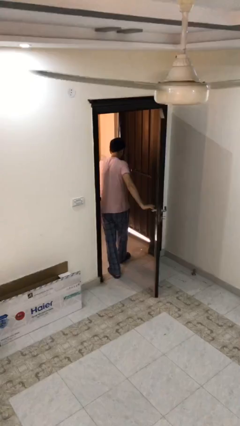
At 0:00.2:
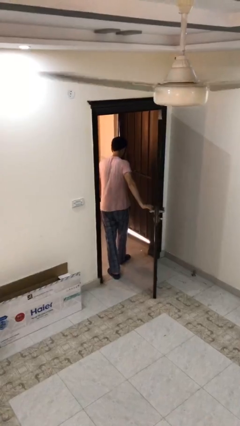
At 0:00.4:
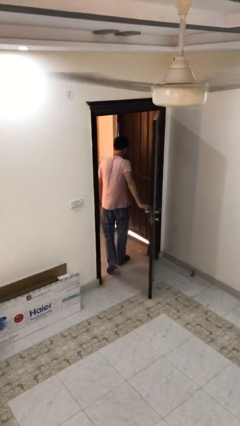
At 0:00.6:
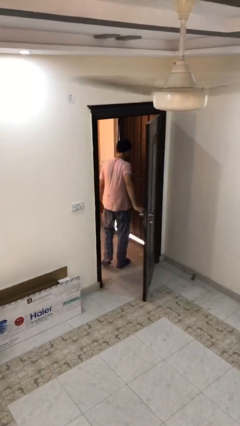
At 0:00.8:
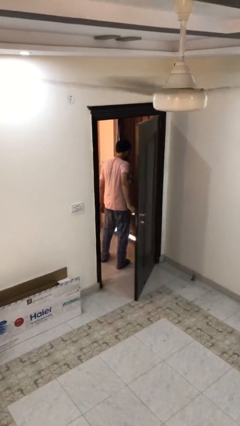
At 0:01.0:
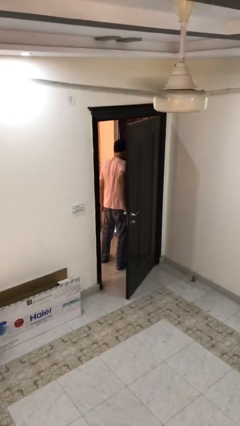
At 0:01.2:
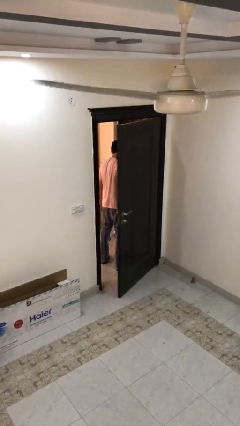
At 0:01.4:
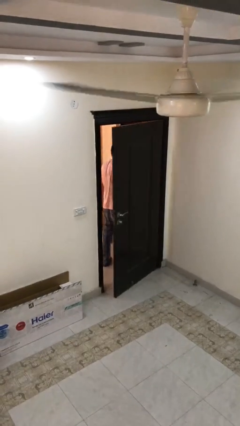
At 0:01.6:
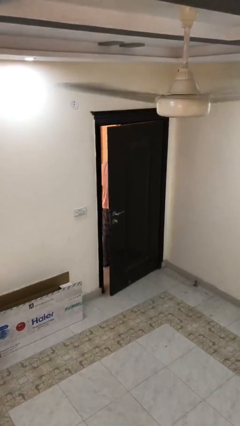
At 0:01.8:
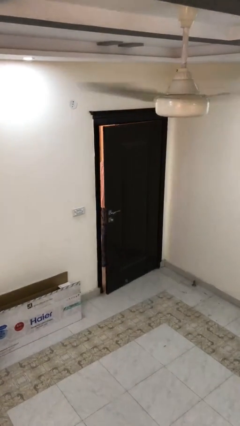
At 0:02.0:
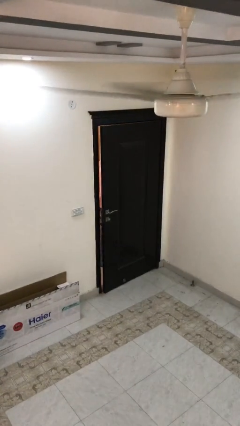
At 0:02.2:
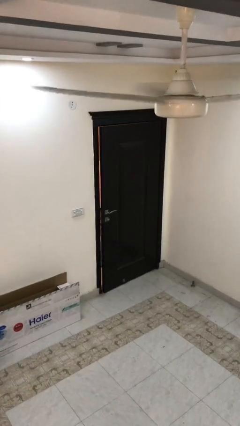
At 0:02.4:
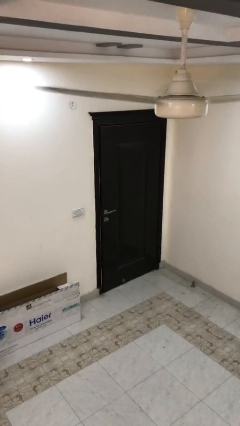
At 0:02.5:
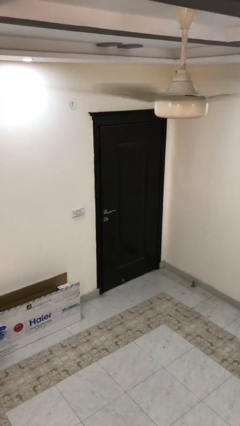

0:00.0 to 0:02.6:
person closes facility door

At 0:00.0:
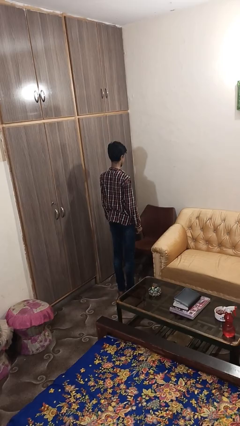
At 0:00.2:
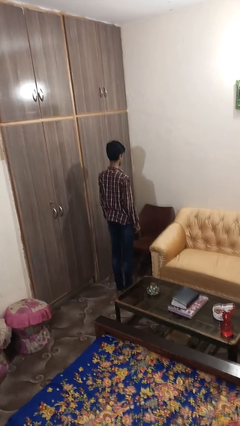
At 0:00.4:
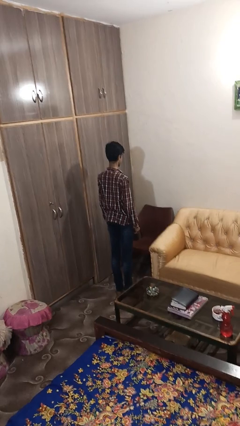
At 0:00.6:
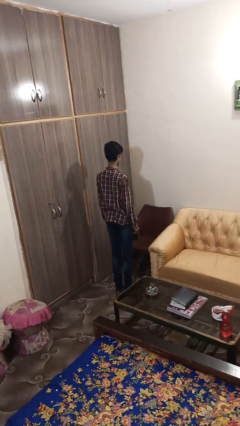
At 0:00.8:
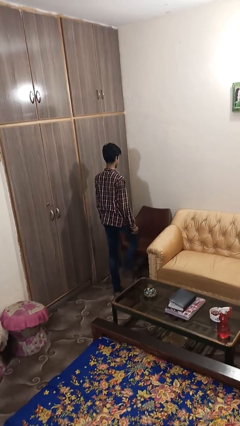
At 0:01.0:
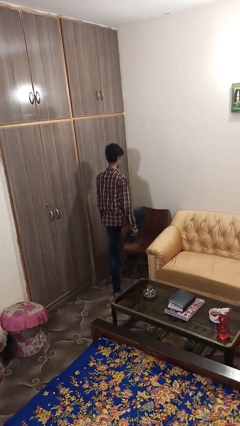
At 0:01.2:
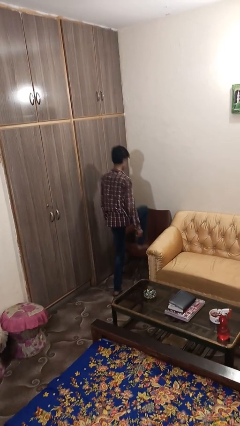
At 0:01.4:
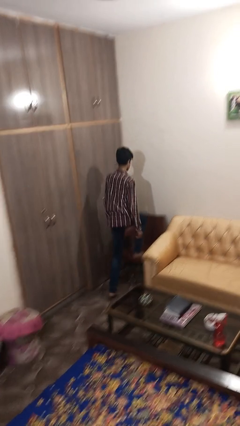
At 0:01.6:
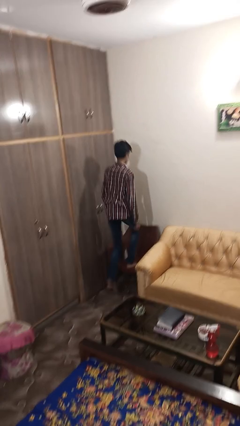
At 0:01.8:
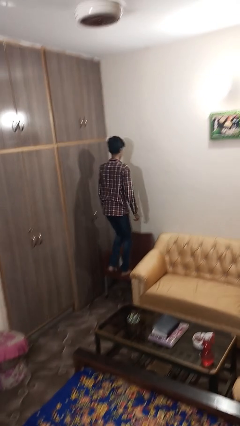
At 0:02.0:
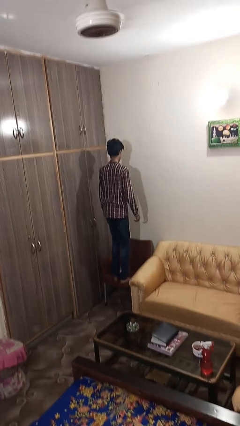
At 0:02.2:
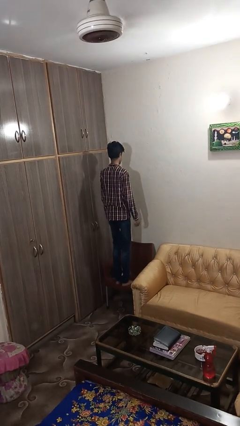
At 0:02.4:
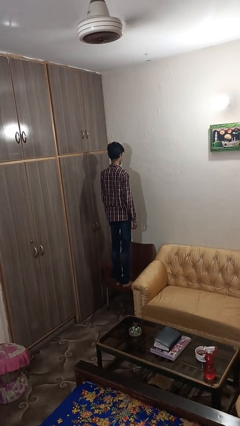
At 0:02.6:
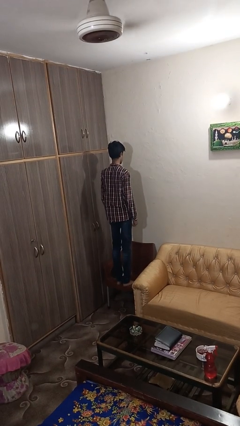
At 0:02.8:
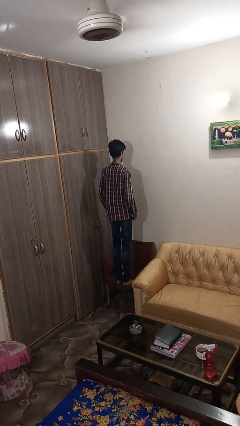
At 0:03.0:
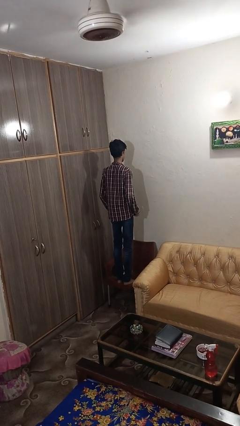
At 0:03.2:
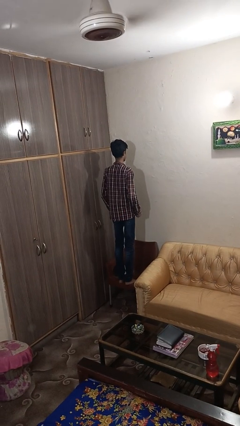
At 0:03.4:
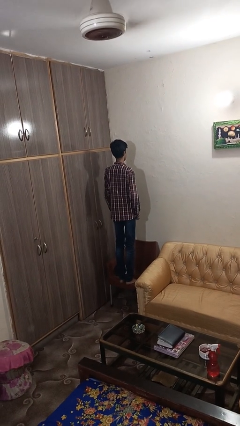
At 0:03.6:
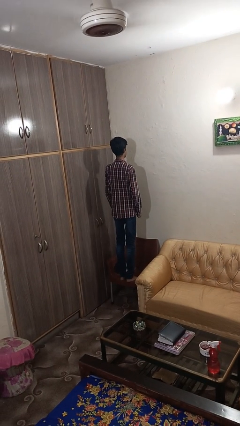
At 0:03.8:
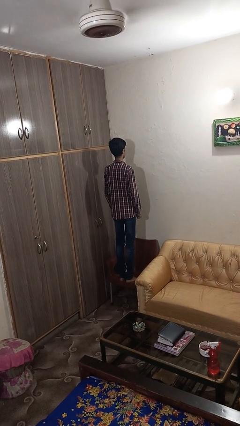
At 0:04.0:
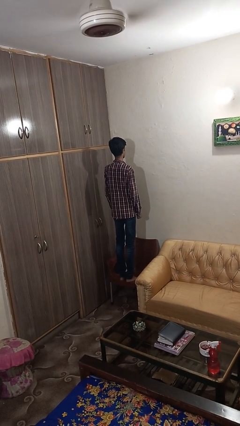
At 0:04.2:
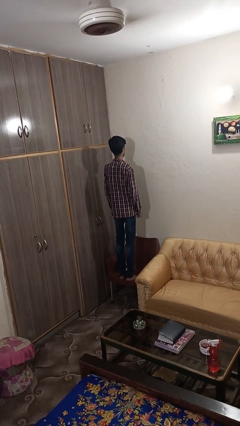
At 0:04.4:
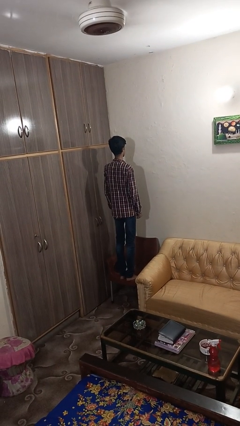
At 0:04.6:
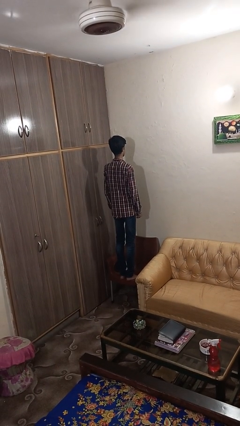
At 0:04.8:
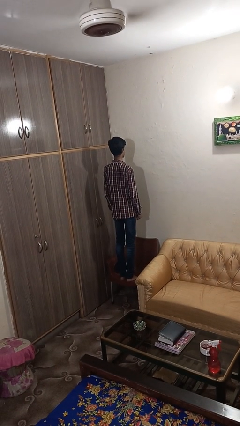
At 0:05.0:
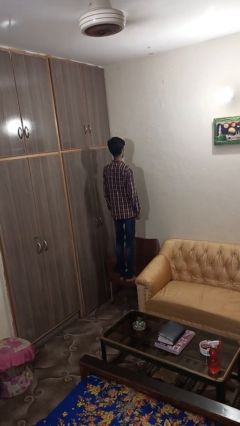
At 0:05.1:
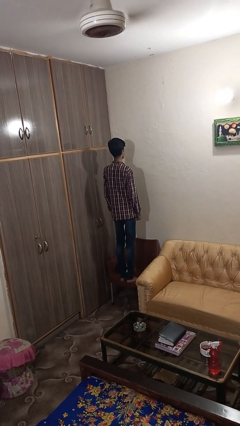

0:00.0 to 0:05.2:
person climbs on chair

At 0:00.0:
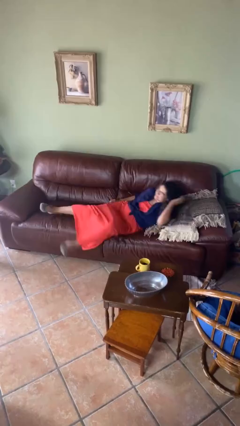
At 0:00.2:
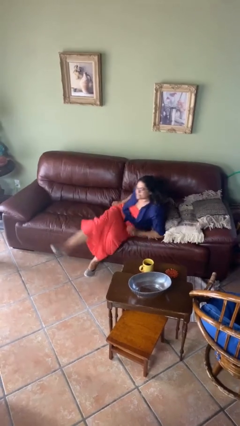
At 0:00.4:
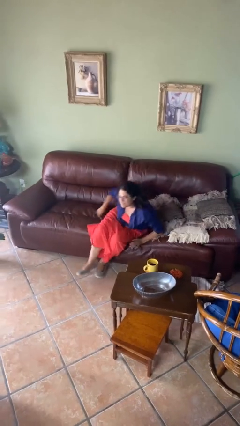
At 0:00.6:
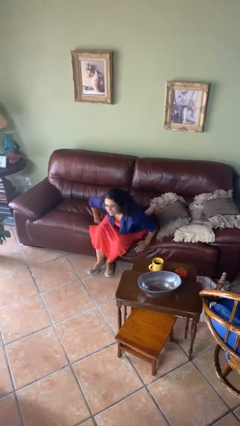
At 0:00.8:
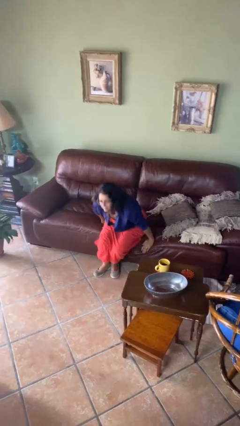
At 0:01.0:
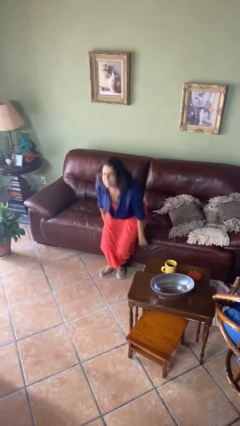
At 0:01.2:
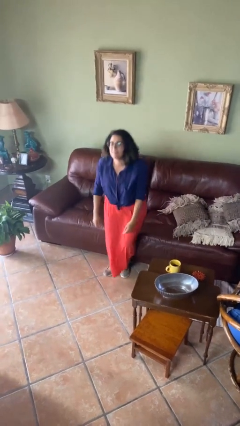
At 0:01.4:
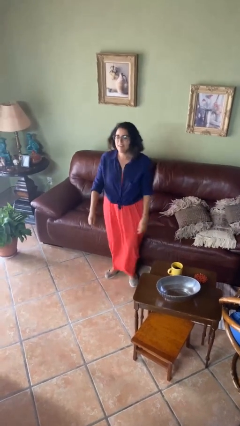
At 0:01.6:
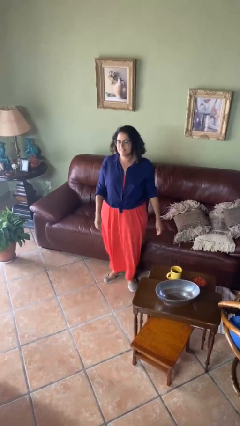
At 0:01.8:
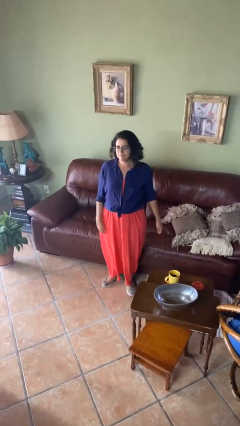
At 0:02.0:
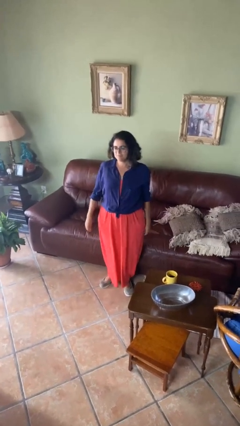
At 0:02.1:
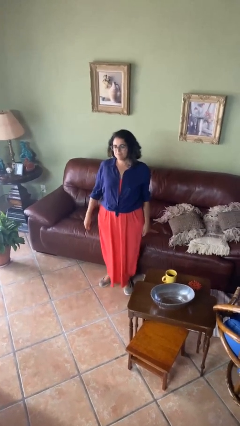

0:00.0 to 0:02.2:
person stands up

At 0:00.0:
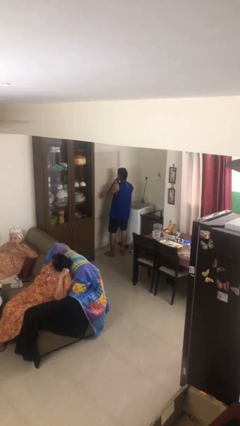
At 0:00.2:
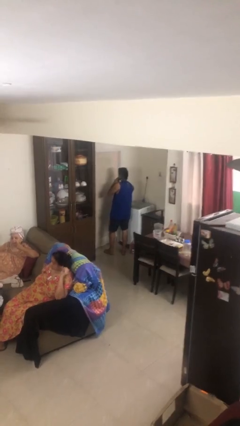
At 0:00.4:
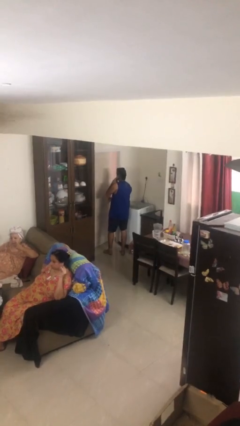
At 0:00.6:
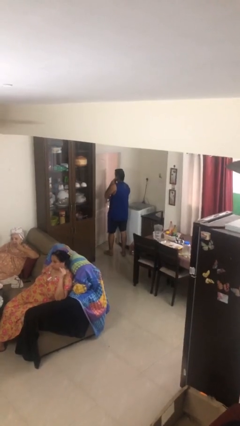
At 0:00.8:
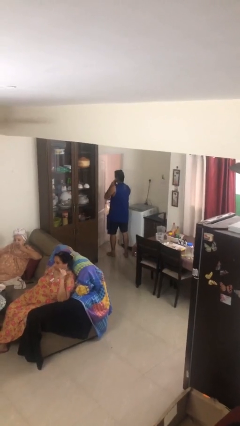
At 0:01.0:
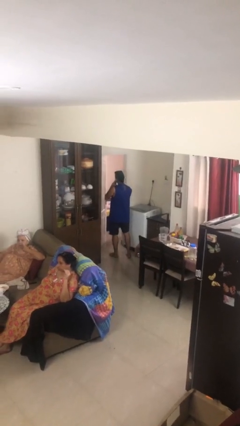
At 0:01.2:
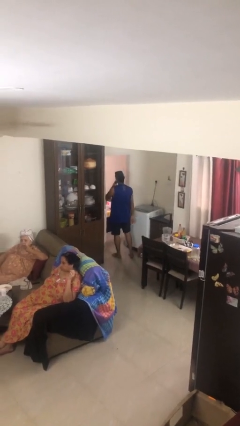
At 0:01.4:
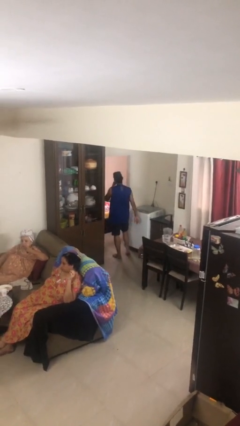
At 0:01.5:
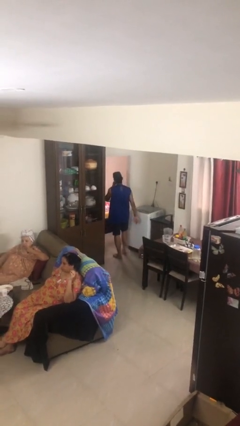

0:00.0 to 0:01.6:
person opens facility door

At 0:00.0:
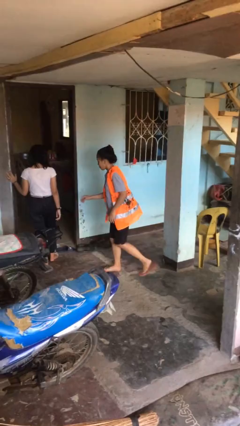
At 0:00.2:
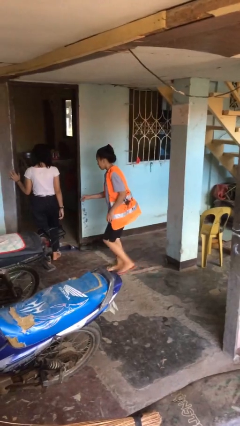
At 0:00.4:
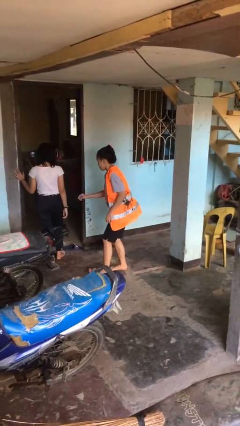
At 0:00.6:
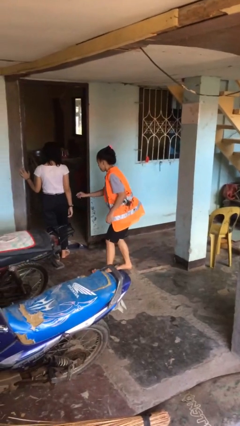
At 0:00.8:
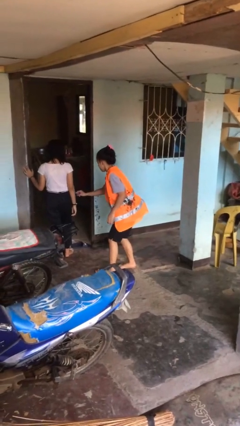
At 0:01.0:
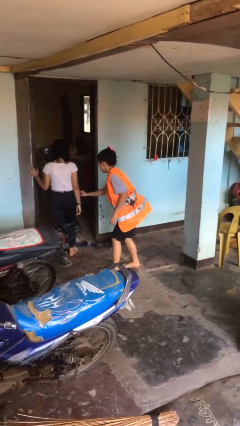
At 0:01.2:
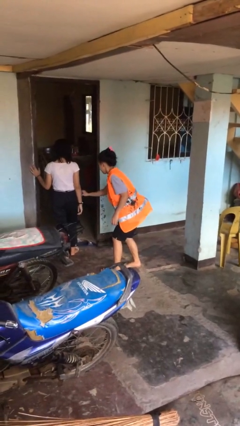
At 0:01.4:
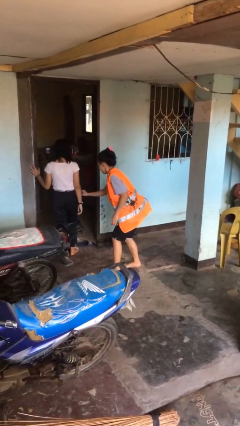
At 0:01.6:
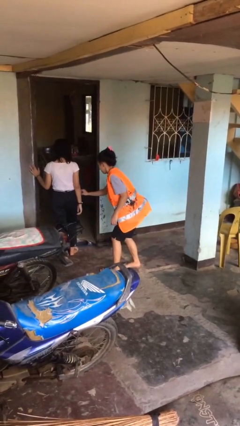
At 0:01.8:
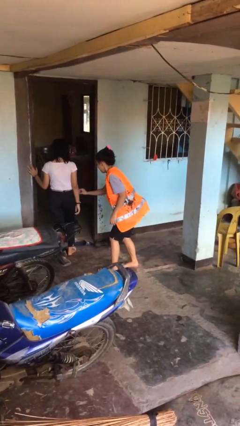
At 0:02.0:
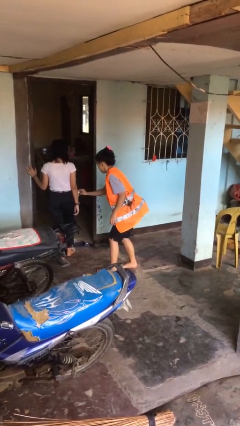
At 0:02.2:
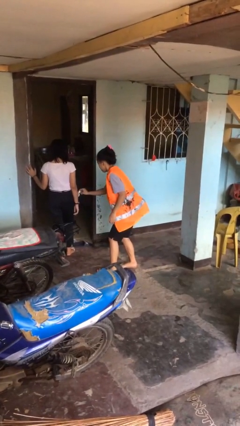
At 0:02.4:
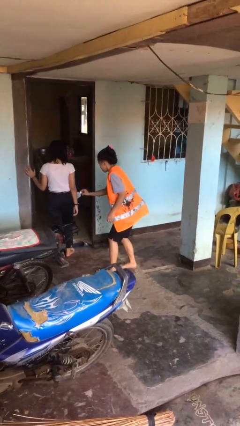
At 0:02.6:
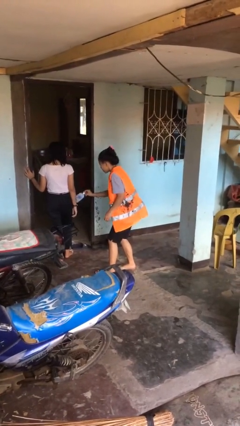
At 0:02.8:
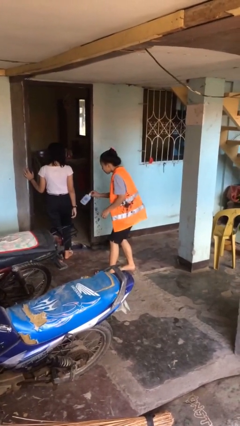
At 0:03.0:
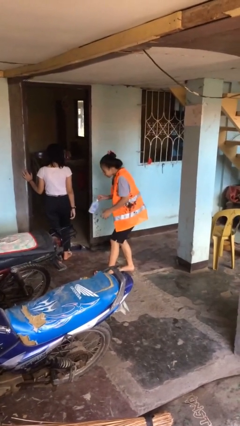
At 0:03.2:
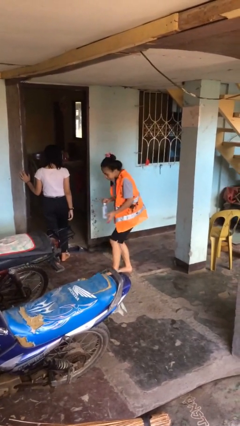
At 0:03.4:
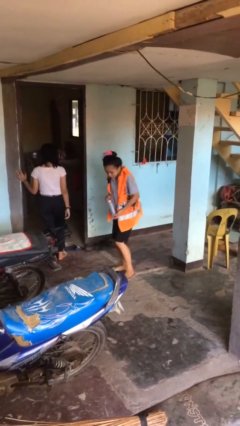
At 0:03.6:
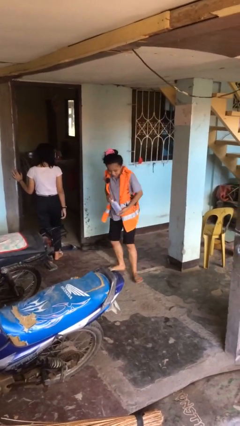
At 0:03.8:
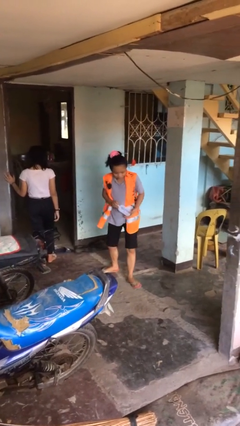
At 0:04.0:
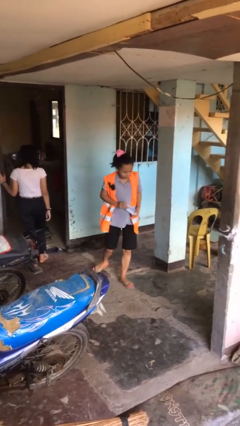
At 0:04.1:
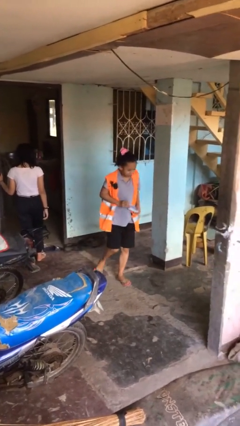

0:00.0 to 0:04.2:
person steals object from person

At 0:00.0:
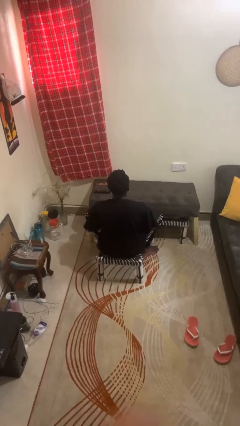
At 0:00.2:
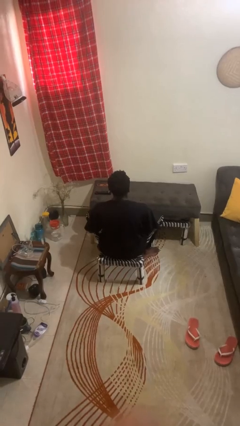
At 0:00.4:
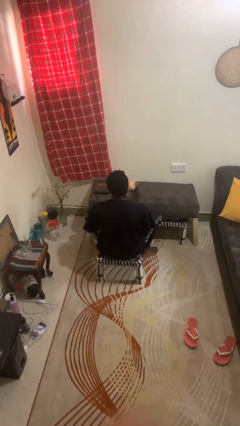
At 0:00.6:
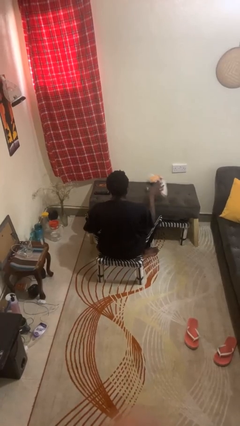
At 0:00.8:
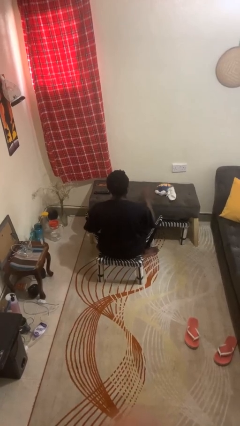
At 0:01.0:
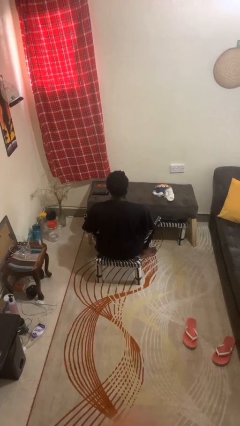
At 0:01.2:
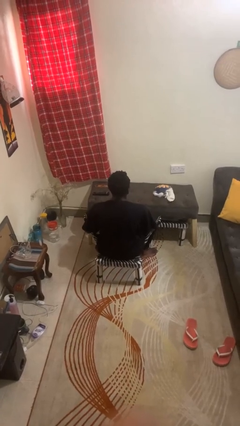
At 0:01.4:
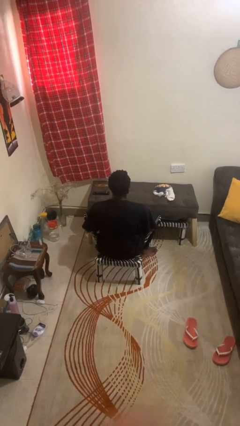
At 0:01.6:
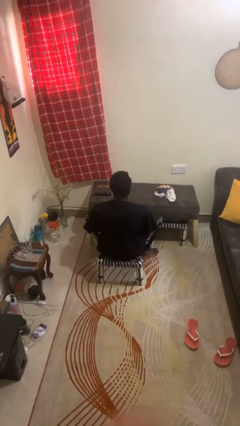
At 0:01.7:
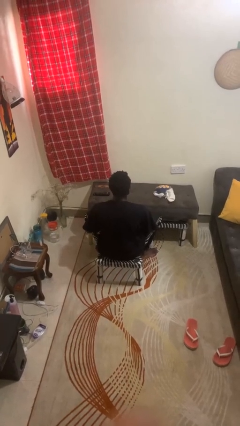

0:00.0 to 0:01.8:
person throws object on table
